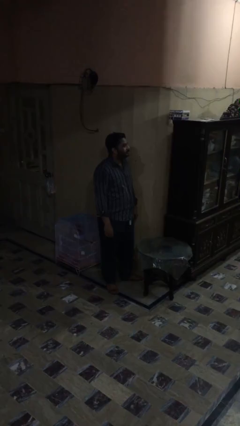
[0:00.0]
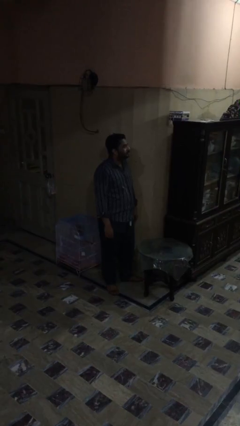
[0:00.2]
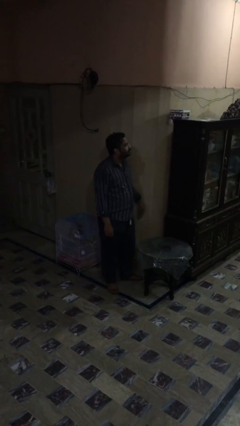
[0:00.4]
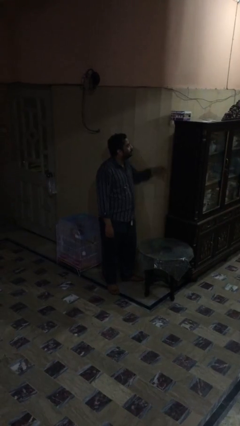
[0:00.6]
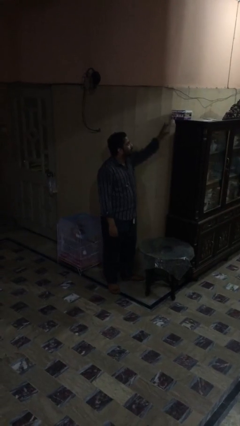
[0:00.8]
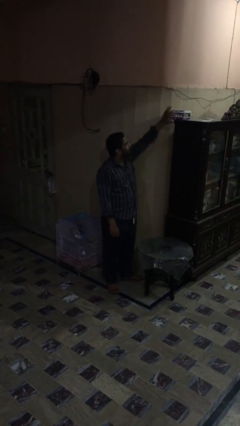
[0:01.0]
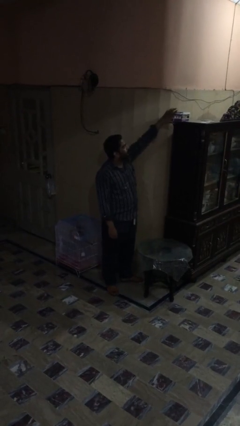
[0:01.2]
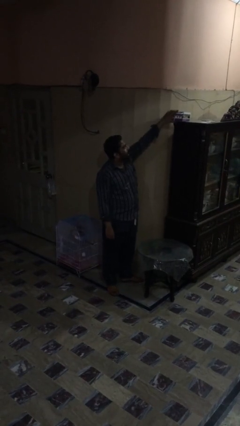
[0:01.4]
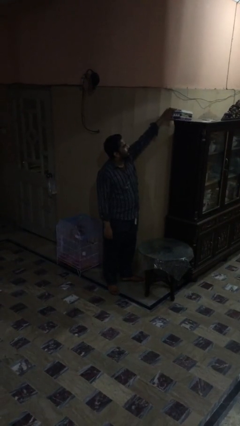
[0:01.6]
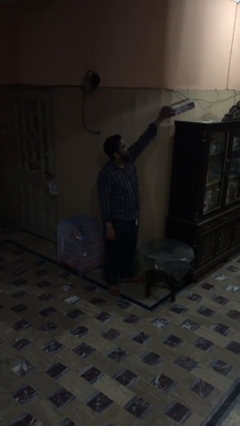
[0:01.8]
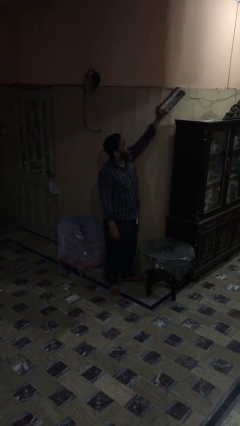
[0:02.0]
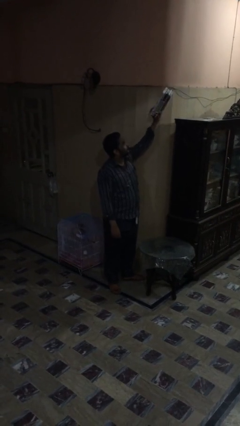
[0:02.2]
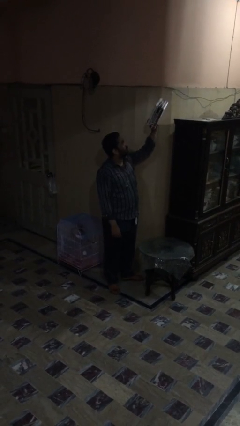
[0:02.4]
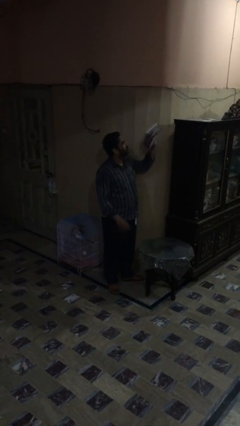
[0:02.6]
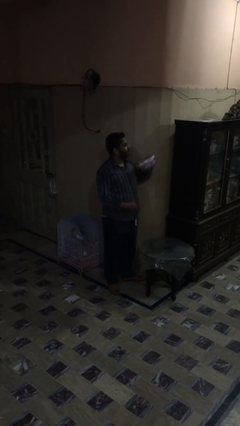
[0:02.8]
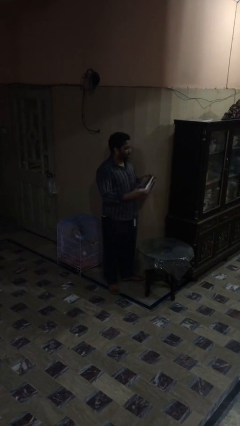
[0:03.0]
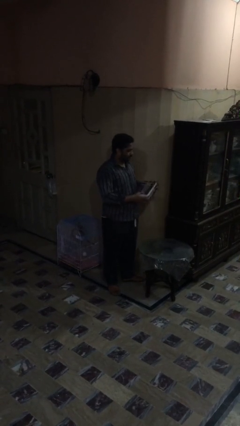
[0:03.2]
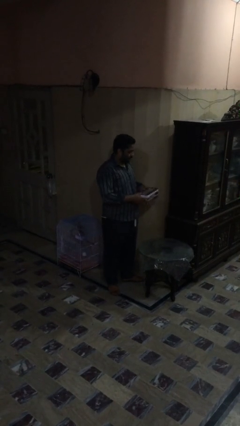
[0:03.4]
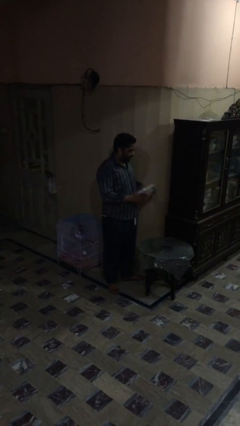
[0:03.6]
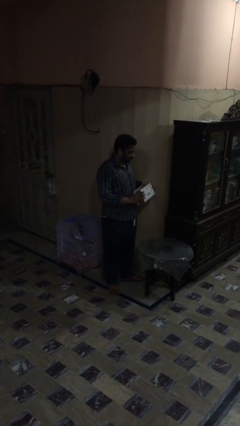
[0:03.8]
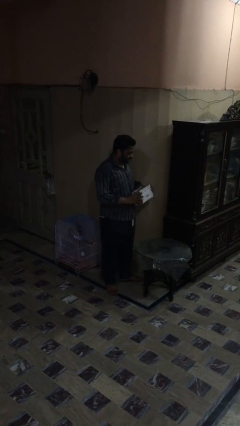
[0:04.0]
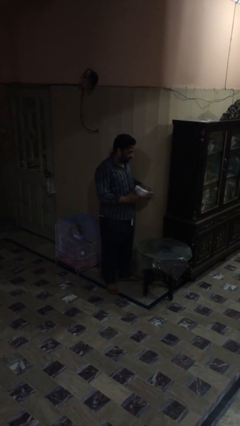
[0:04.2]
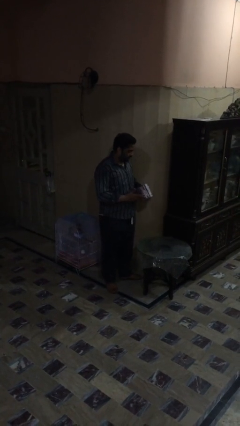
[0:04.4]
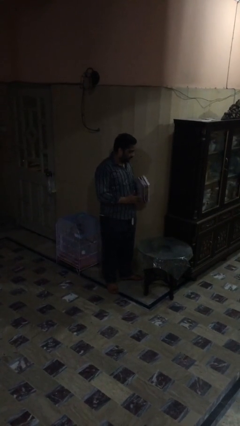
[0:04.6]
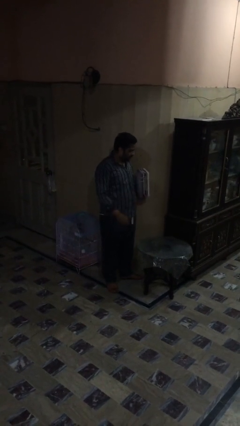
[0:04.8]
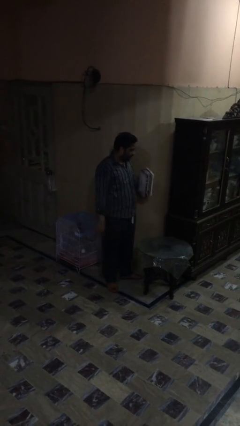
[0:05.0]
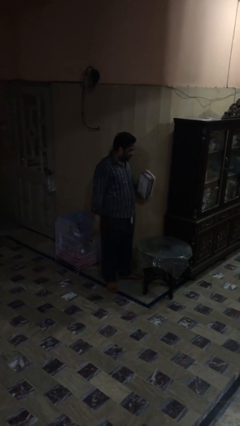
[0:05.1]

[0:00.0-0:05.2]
person picks up object from shelf

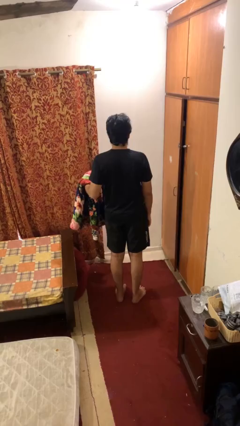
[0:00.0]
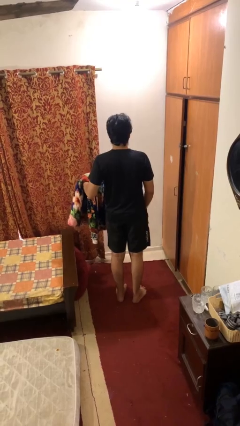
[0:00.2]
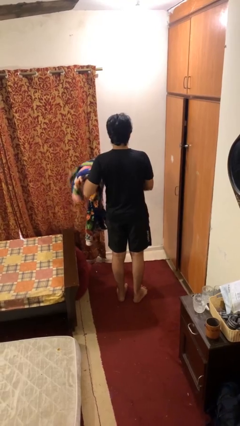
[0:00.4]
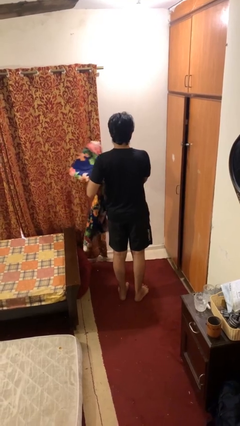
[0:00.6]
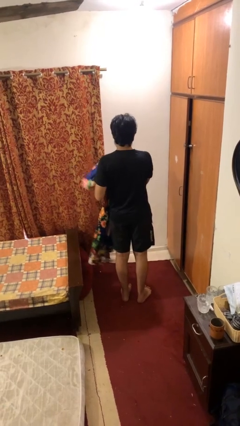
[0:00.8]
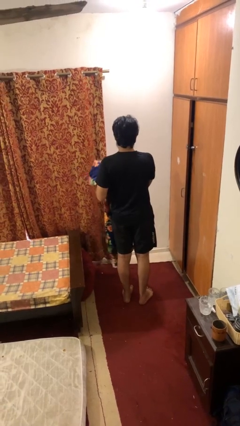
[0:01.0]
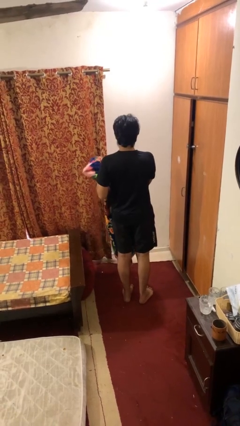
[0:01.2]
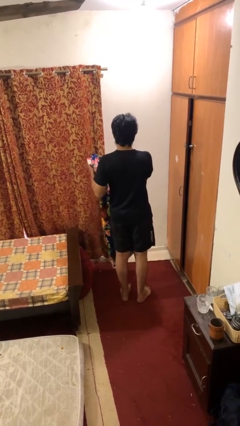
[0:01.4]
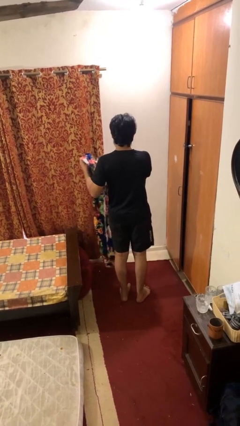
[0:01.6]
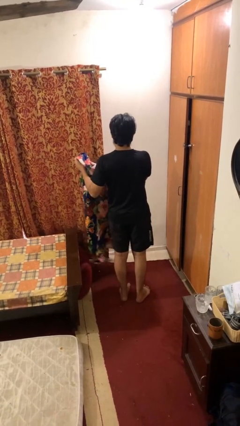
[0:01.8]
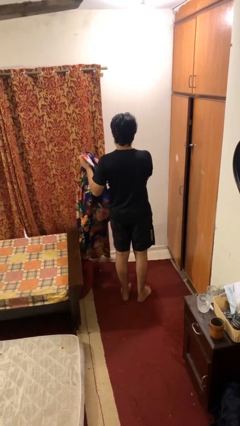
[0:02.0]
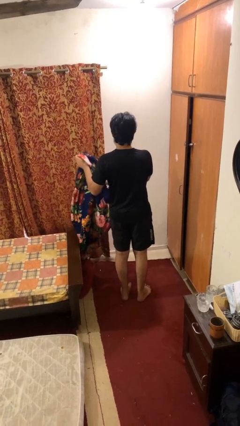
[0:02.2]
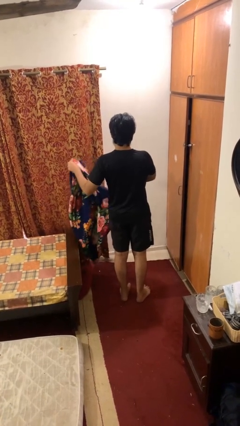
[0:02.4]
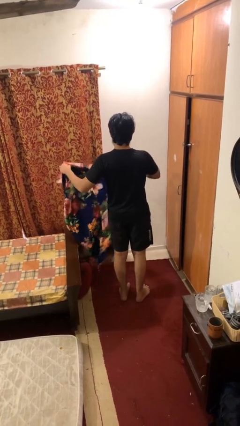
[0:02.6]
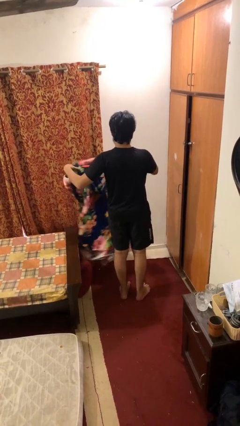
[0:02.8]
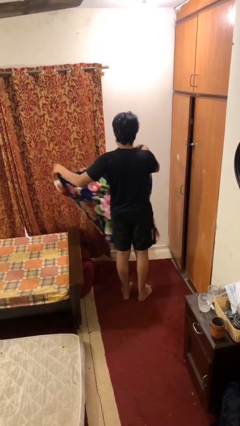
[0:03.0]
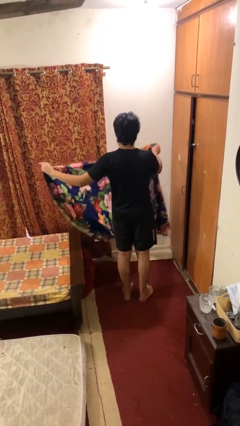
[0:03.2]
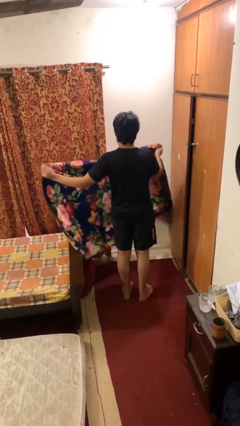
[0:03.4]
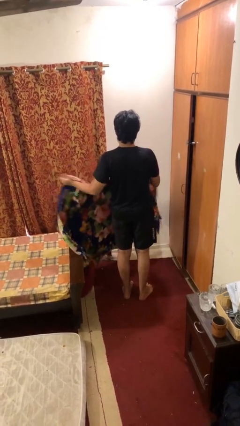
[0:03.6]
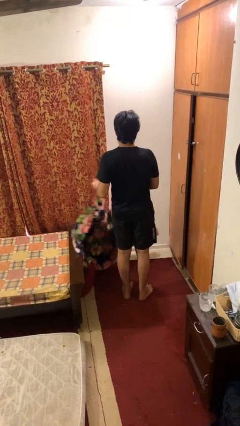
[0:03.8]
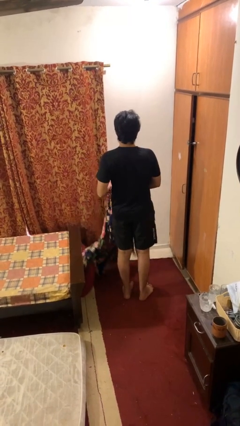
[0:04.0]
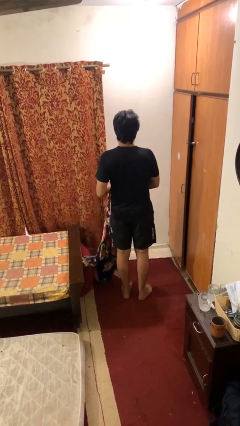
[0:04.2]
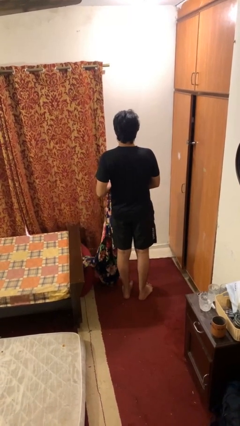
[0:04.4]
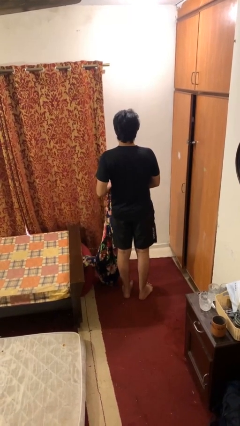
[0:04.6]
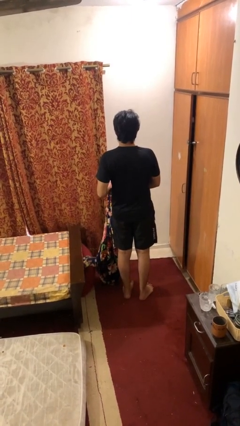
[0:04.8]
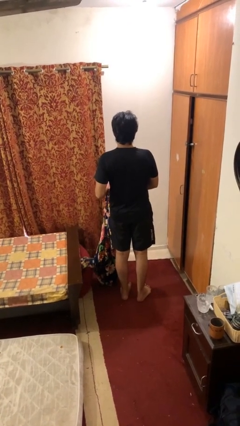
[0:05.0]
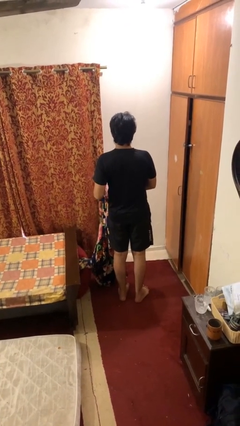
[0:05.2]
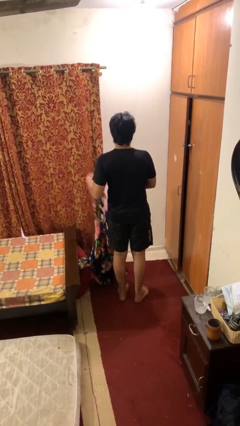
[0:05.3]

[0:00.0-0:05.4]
person unfolds blanket

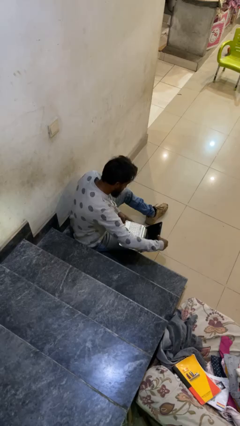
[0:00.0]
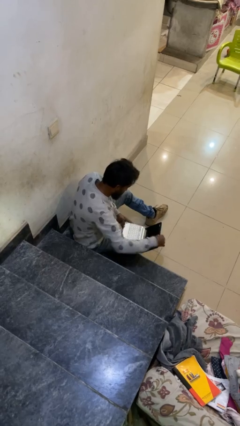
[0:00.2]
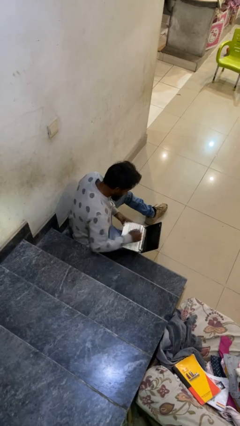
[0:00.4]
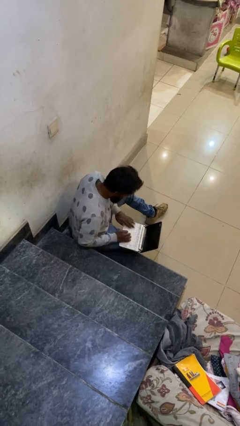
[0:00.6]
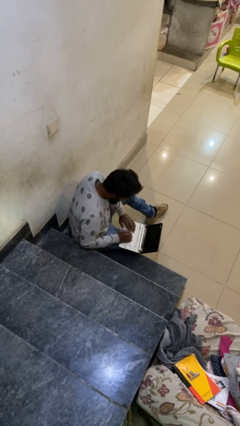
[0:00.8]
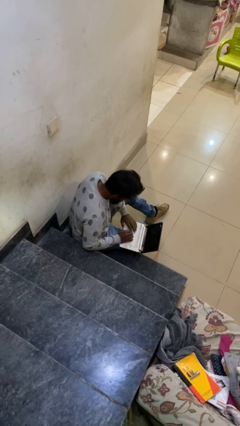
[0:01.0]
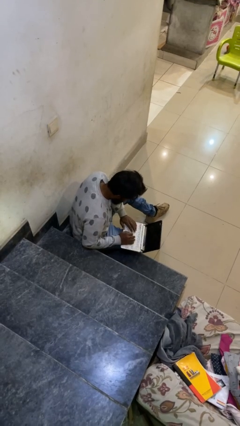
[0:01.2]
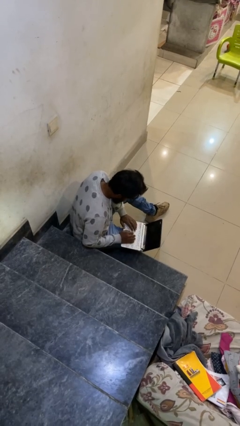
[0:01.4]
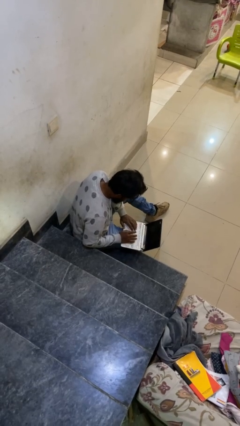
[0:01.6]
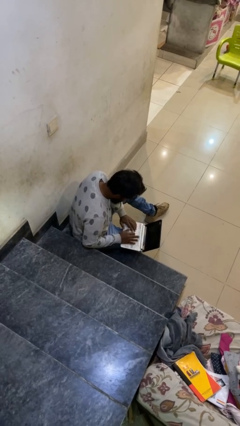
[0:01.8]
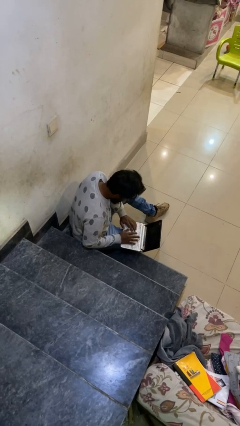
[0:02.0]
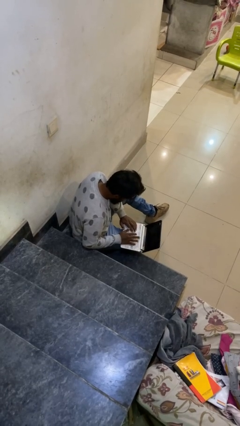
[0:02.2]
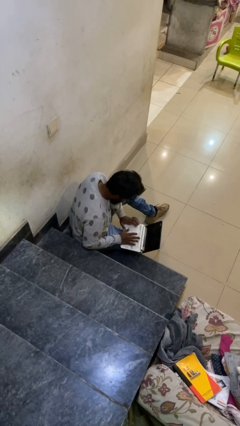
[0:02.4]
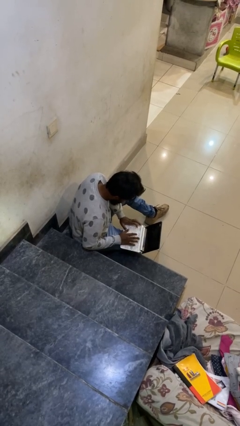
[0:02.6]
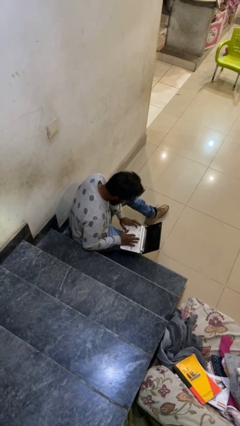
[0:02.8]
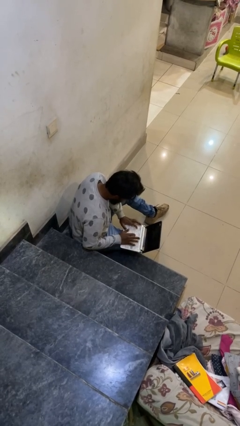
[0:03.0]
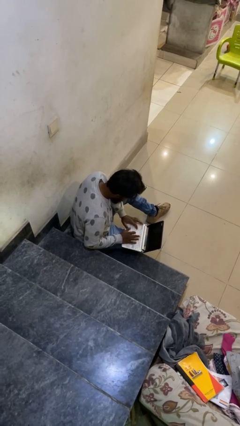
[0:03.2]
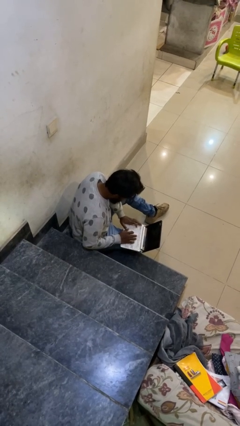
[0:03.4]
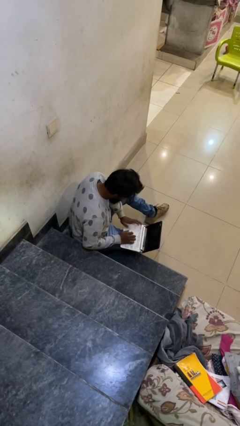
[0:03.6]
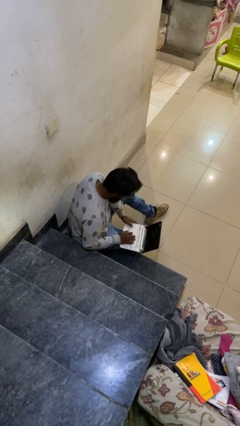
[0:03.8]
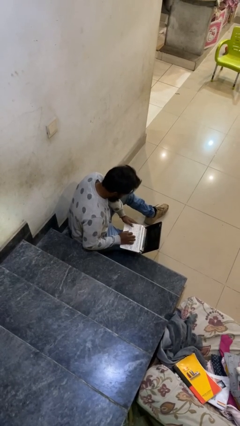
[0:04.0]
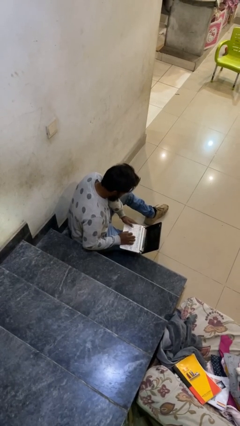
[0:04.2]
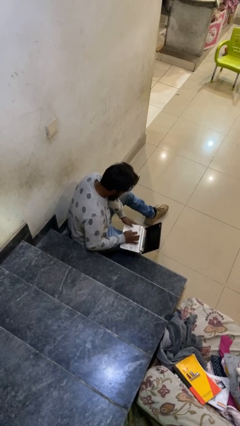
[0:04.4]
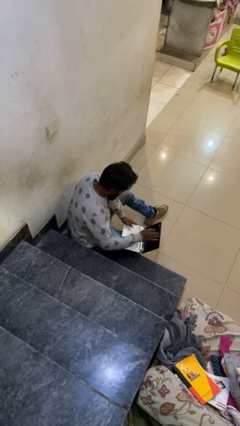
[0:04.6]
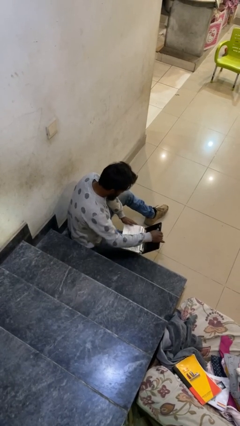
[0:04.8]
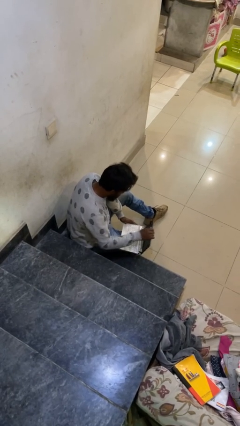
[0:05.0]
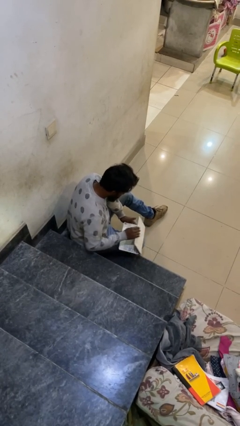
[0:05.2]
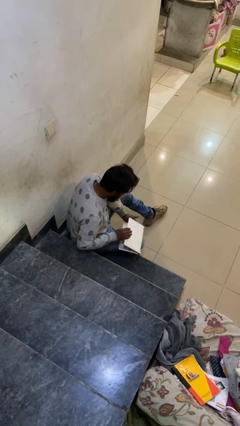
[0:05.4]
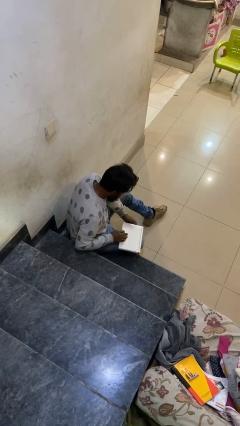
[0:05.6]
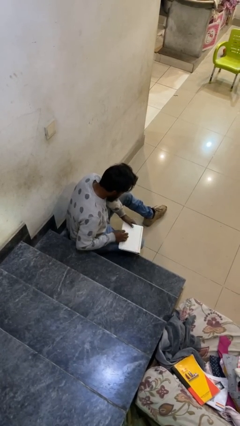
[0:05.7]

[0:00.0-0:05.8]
person interacts with laptop

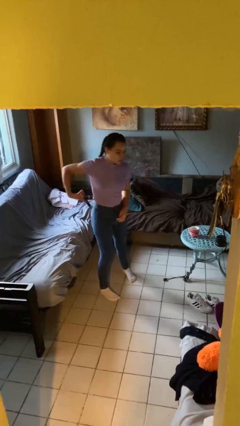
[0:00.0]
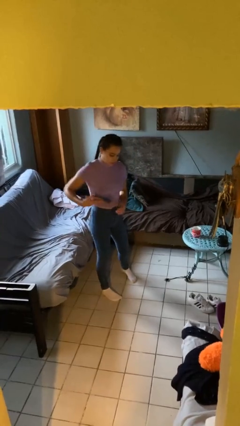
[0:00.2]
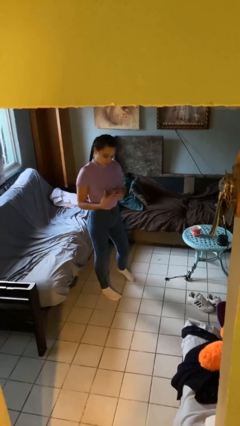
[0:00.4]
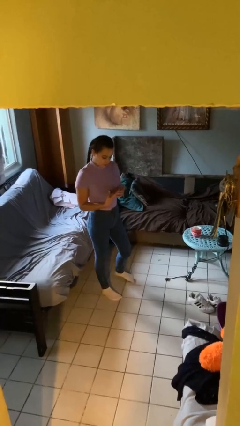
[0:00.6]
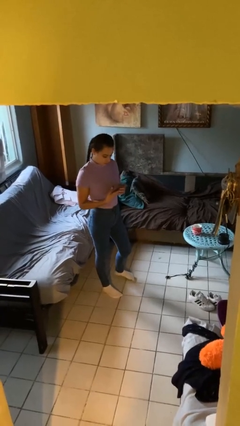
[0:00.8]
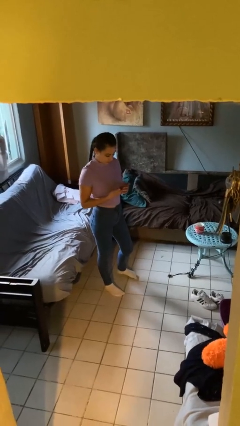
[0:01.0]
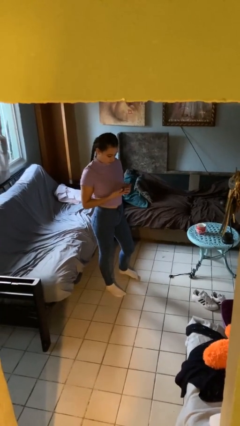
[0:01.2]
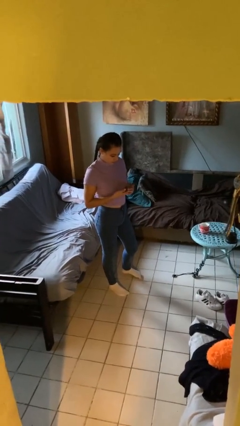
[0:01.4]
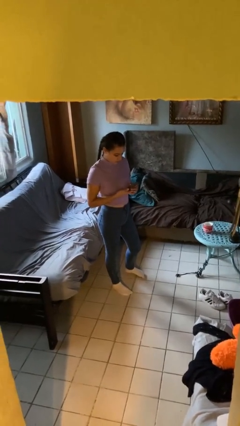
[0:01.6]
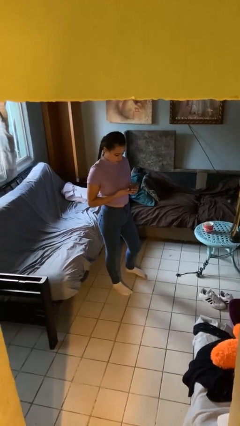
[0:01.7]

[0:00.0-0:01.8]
person takes phone from pocket
